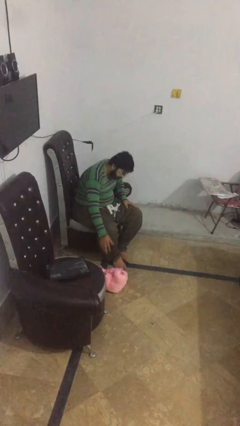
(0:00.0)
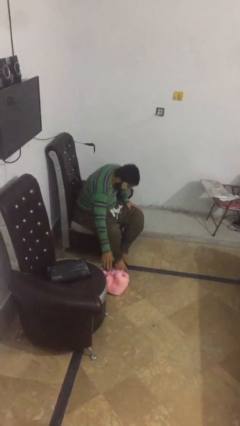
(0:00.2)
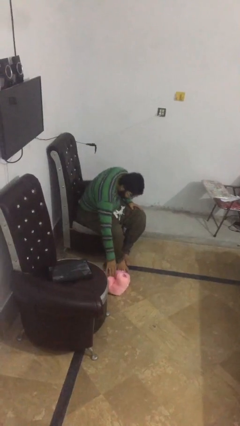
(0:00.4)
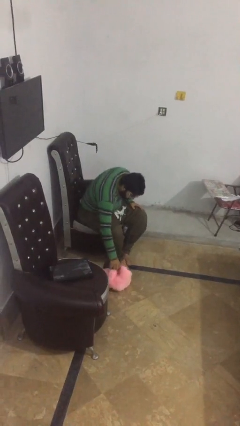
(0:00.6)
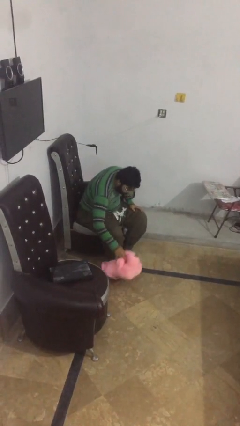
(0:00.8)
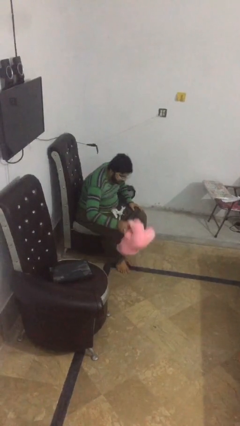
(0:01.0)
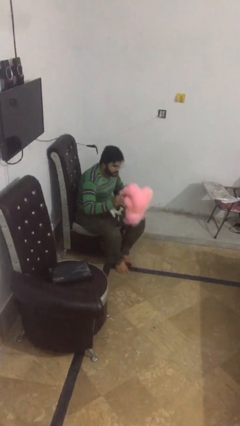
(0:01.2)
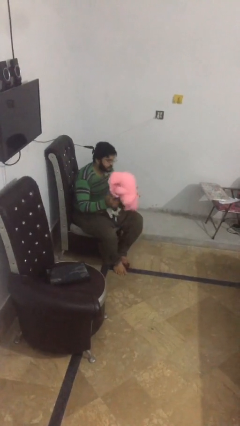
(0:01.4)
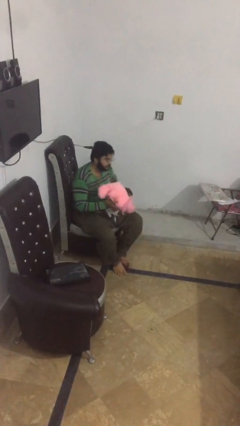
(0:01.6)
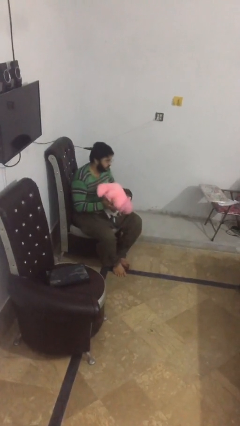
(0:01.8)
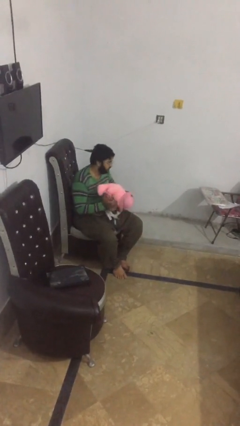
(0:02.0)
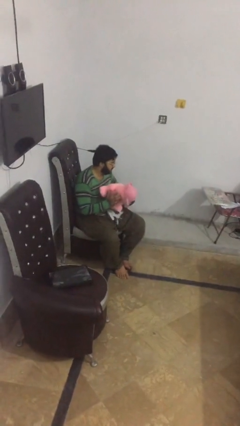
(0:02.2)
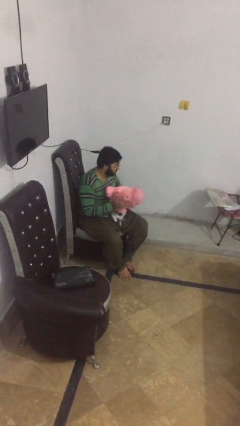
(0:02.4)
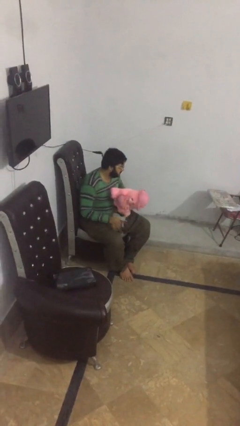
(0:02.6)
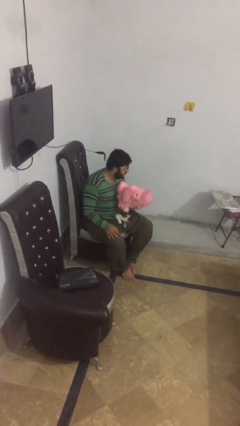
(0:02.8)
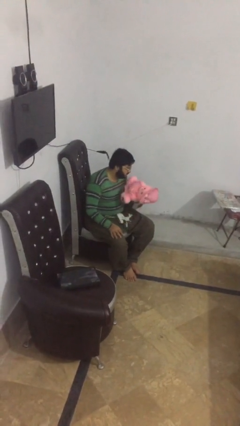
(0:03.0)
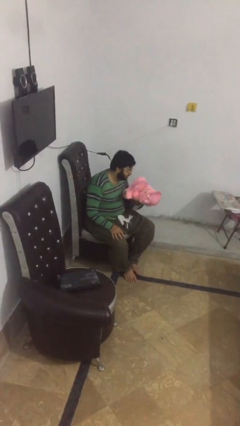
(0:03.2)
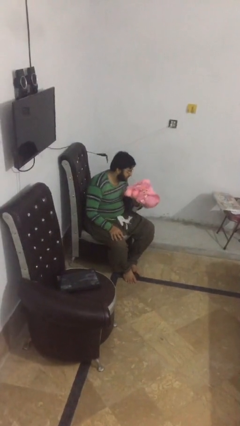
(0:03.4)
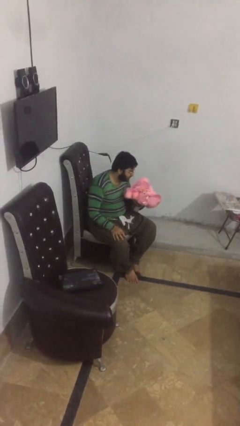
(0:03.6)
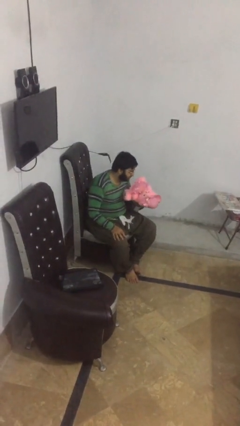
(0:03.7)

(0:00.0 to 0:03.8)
person puts down object on table

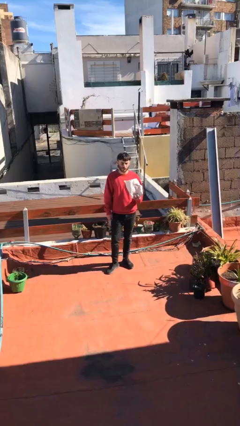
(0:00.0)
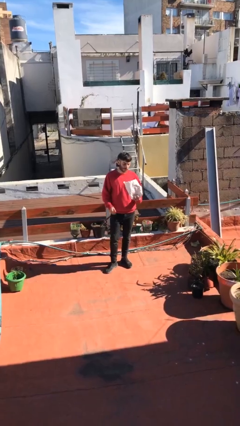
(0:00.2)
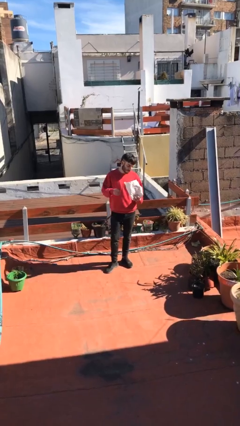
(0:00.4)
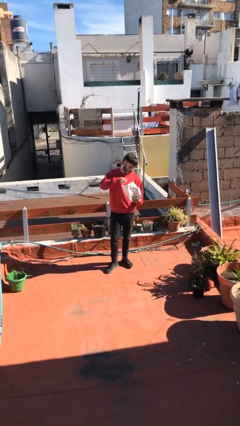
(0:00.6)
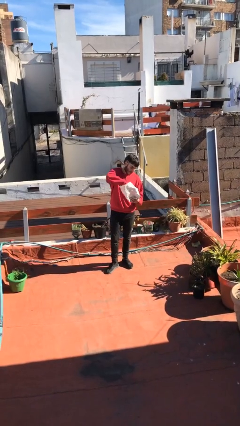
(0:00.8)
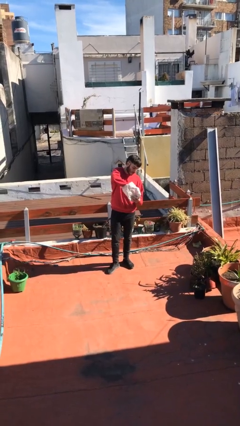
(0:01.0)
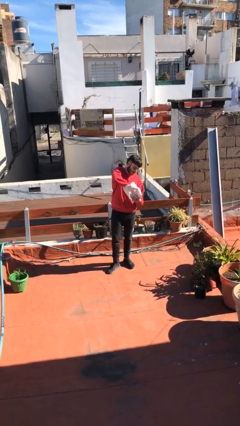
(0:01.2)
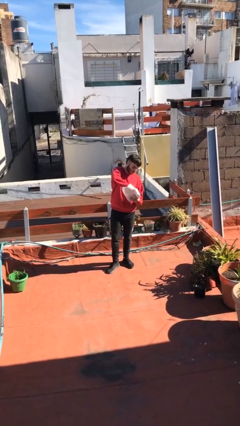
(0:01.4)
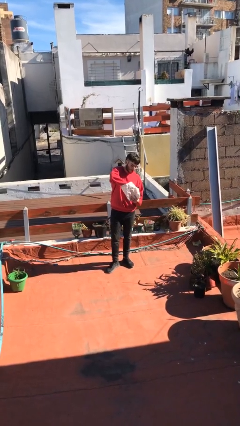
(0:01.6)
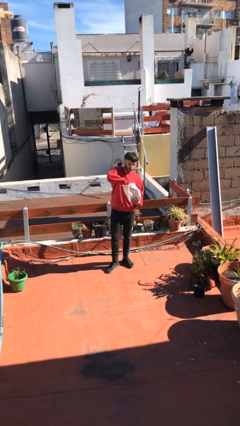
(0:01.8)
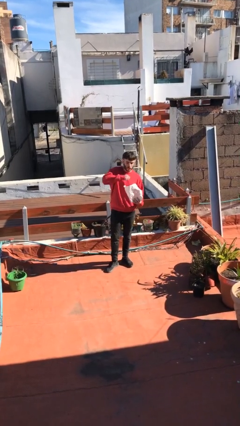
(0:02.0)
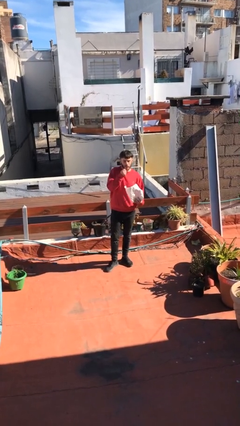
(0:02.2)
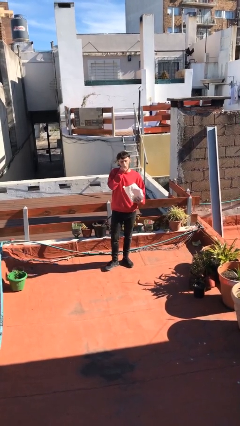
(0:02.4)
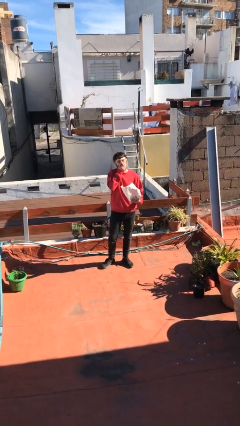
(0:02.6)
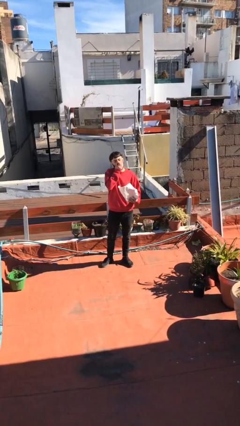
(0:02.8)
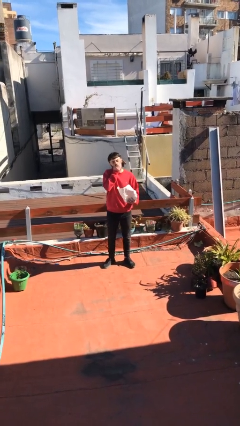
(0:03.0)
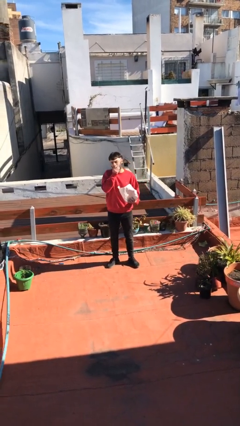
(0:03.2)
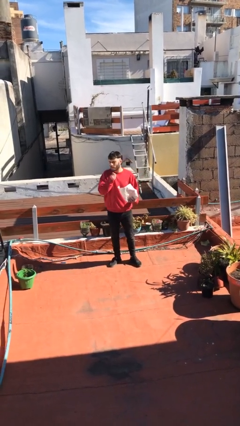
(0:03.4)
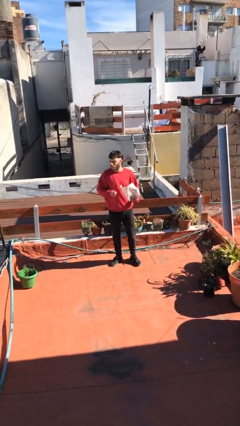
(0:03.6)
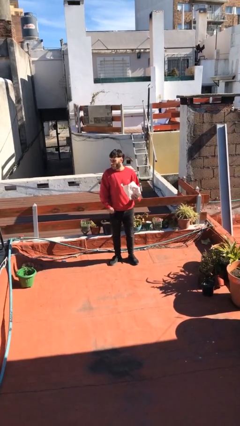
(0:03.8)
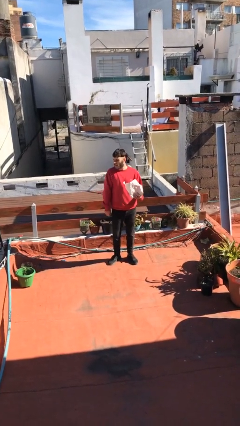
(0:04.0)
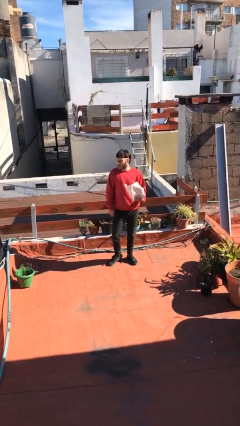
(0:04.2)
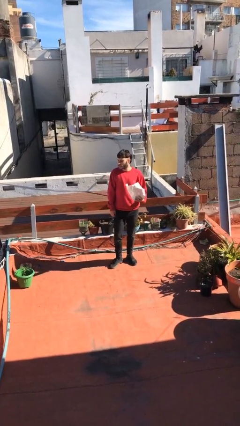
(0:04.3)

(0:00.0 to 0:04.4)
person eats snack from bag

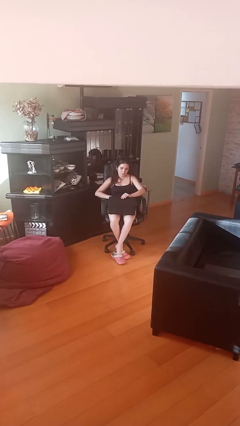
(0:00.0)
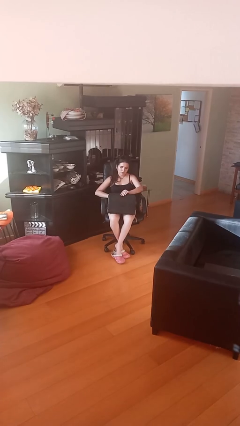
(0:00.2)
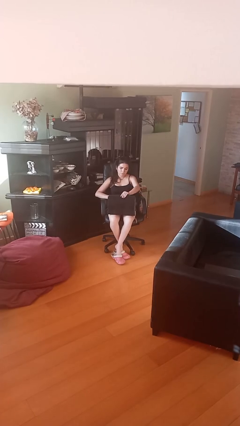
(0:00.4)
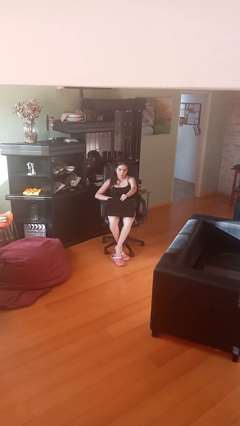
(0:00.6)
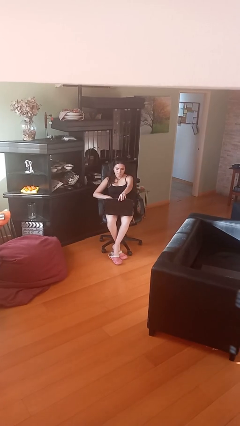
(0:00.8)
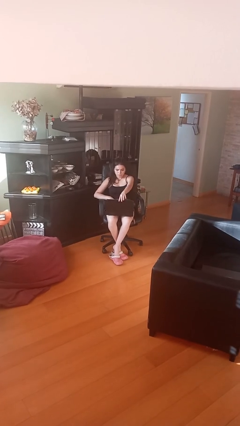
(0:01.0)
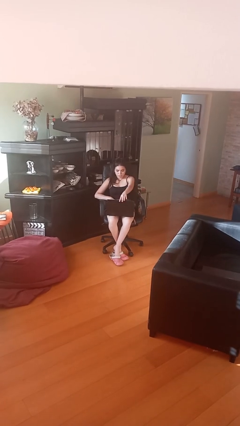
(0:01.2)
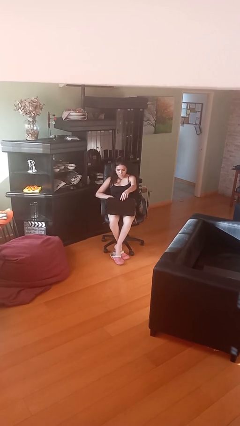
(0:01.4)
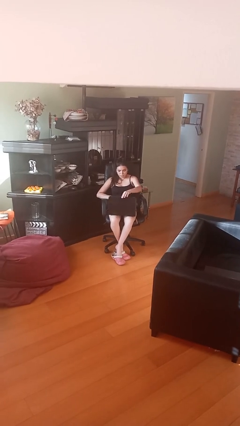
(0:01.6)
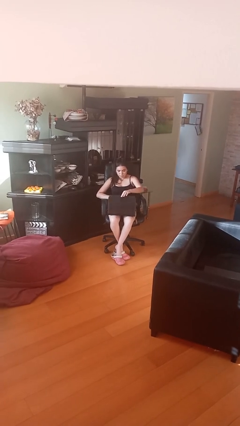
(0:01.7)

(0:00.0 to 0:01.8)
person interacts with laptop

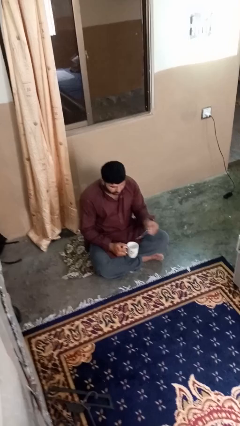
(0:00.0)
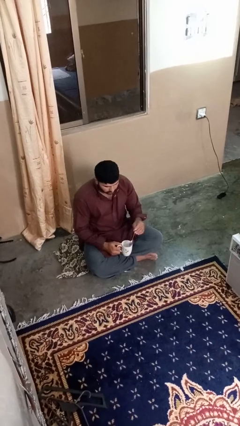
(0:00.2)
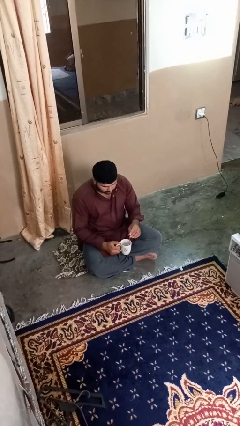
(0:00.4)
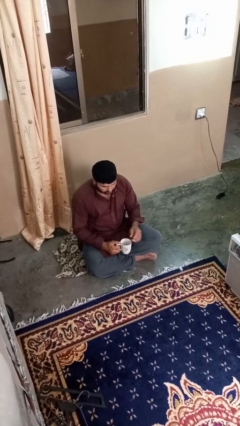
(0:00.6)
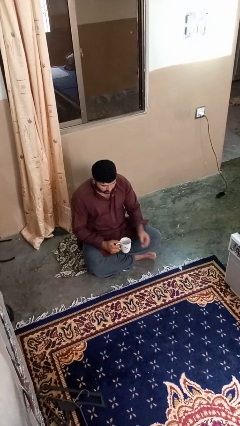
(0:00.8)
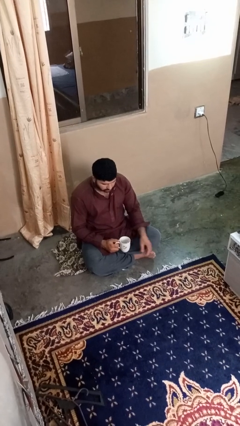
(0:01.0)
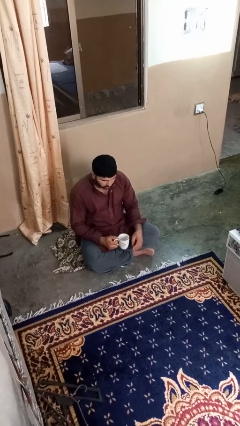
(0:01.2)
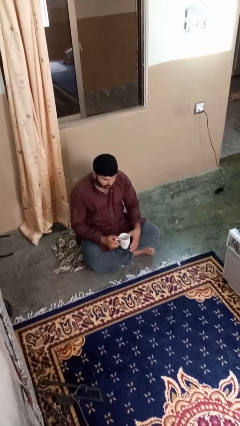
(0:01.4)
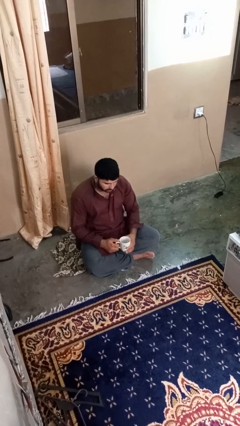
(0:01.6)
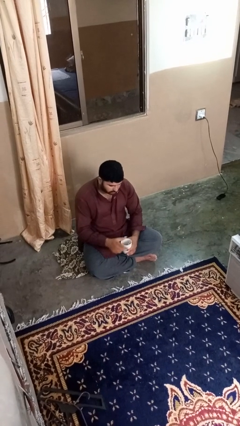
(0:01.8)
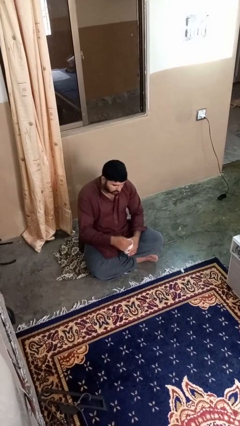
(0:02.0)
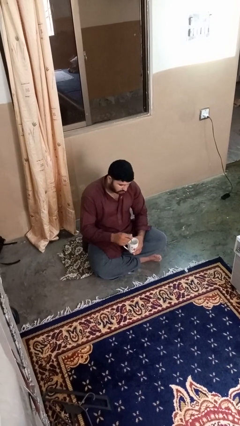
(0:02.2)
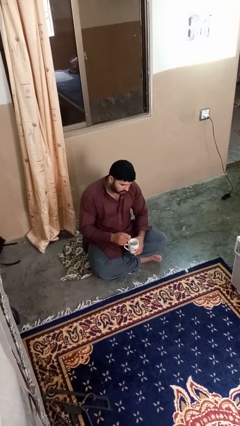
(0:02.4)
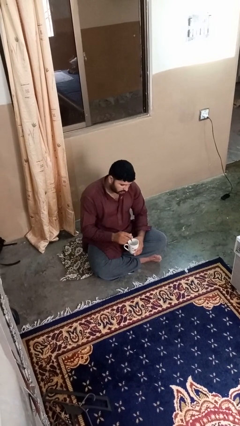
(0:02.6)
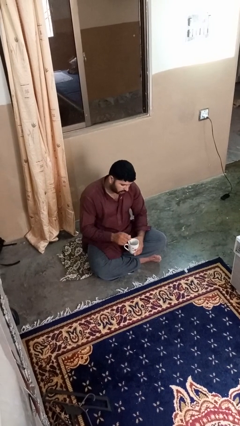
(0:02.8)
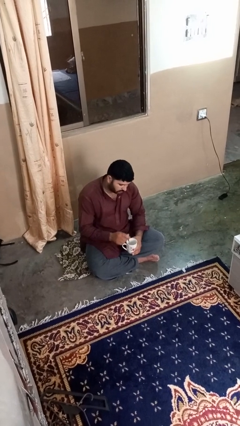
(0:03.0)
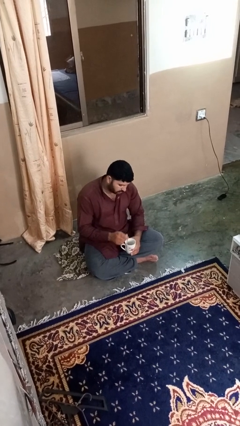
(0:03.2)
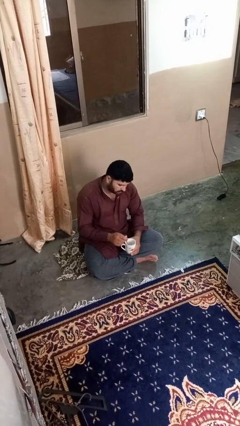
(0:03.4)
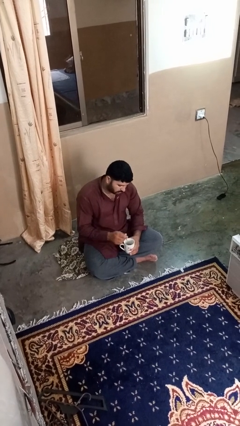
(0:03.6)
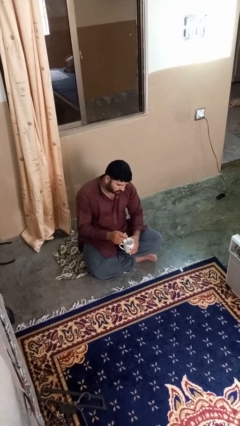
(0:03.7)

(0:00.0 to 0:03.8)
person stirs mug

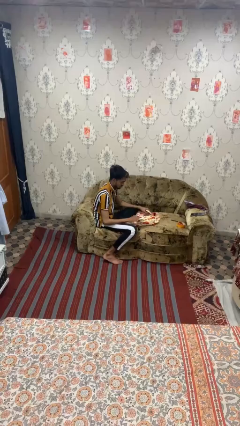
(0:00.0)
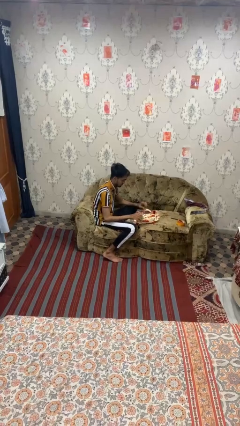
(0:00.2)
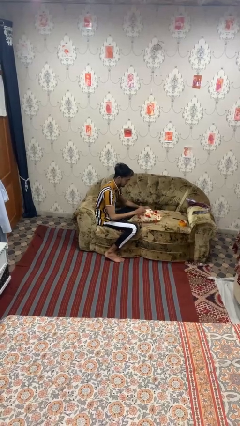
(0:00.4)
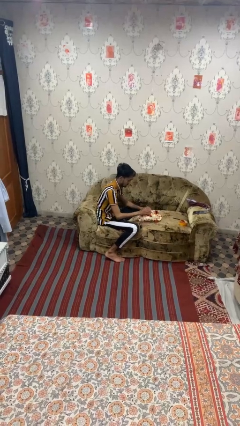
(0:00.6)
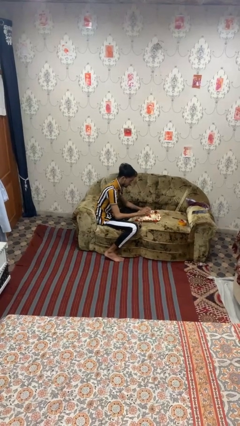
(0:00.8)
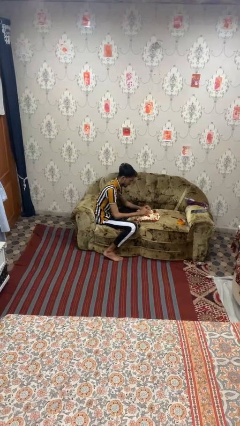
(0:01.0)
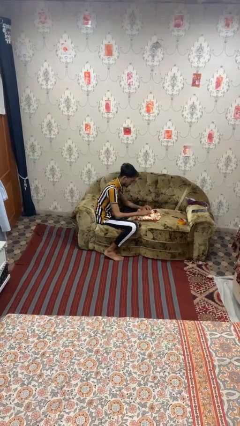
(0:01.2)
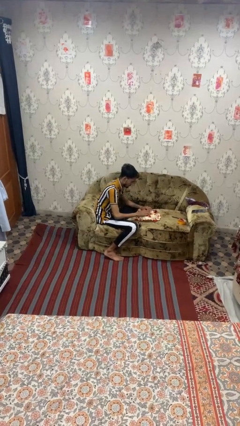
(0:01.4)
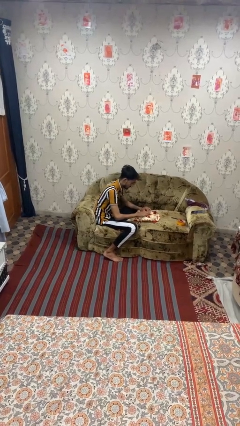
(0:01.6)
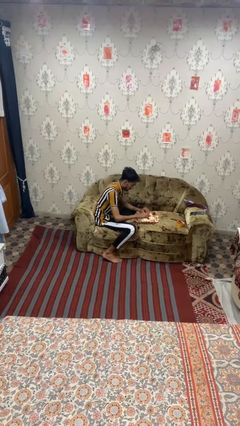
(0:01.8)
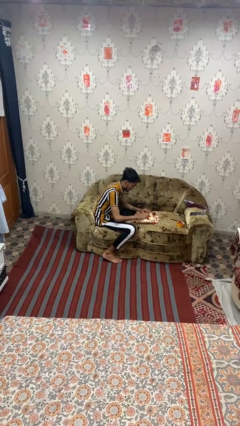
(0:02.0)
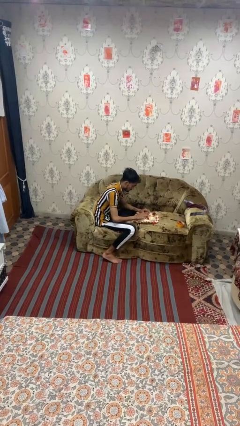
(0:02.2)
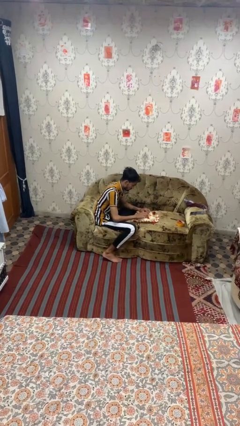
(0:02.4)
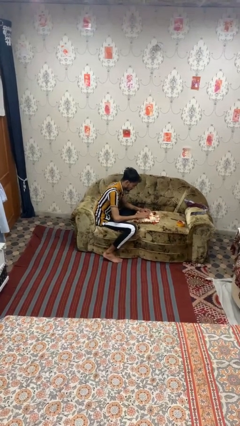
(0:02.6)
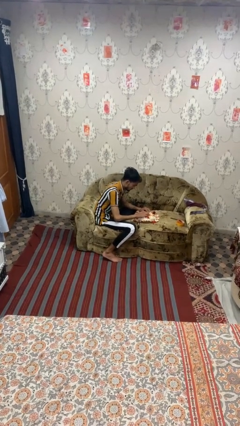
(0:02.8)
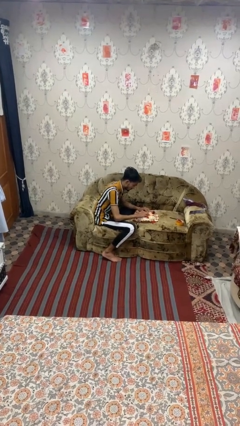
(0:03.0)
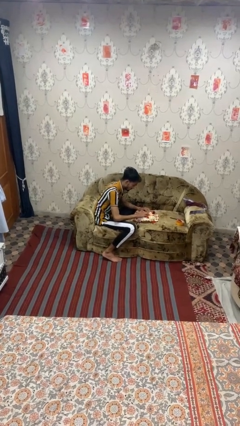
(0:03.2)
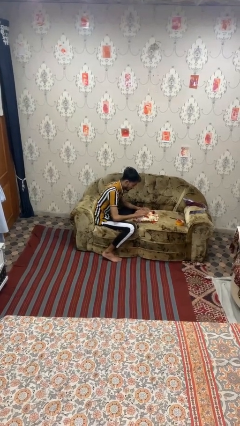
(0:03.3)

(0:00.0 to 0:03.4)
person wraps box
